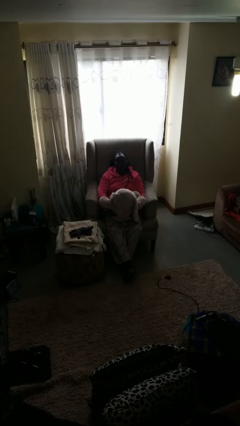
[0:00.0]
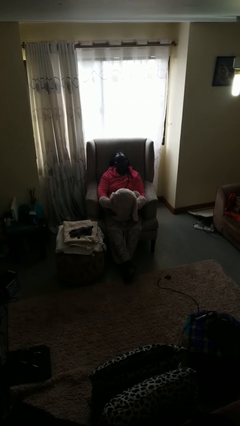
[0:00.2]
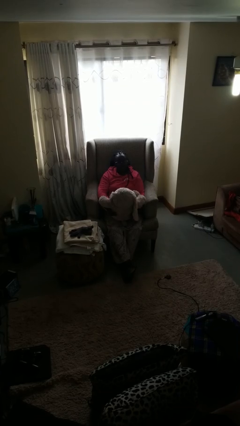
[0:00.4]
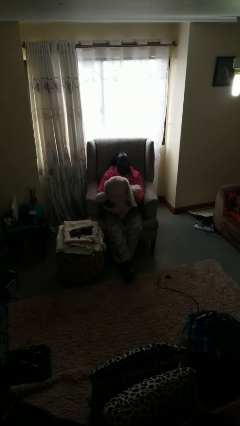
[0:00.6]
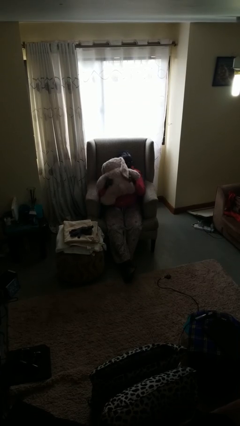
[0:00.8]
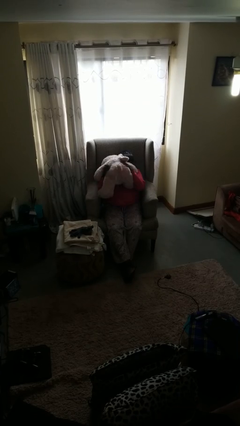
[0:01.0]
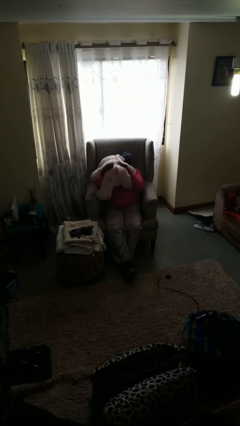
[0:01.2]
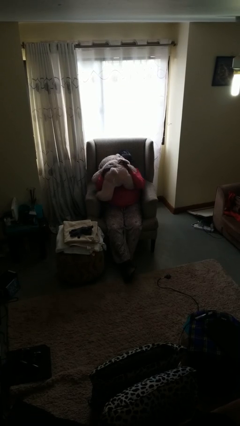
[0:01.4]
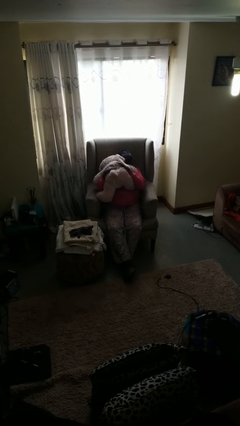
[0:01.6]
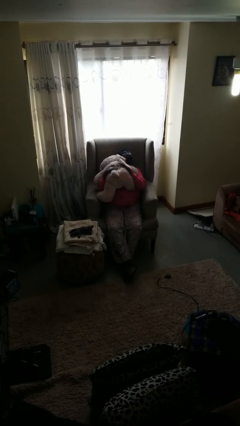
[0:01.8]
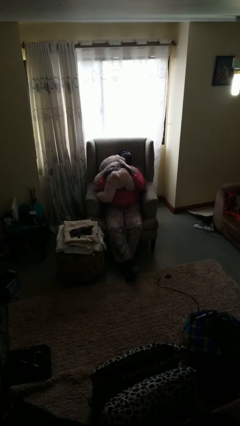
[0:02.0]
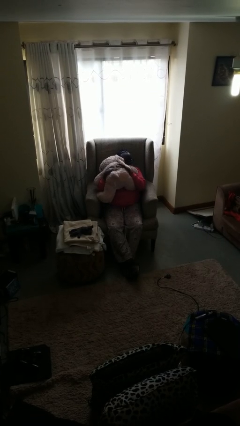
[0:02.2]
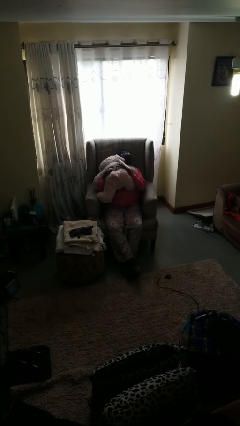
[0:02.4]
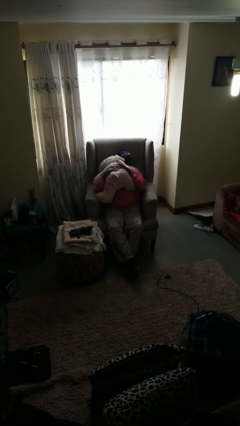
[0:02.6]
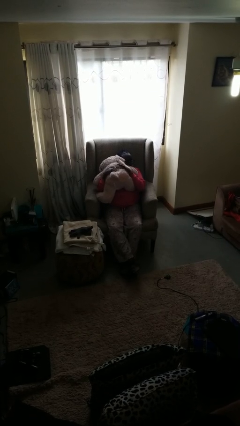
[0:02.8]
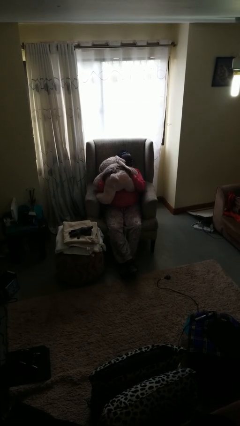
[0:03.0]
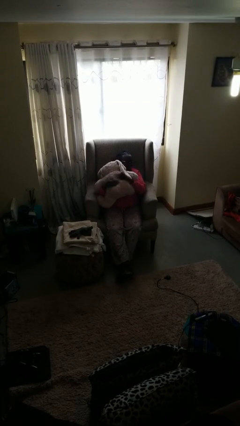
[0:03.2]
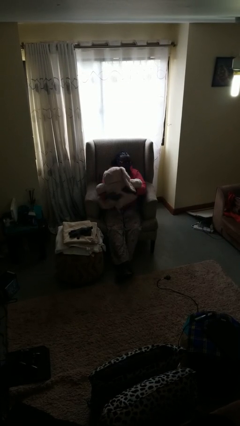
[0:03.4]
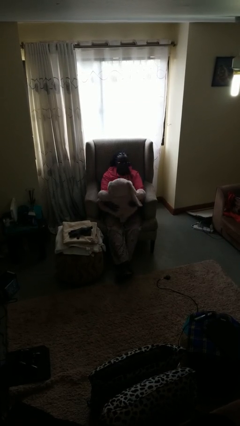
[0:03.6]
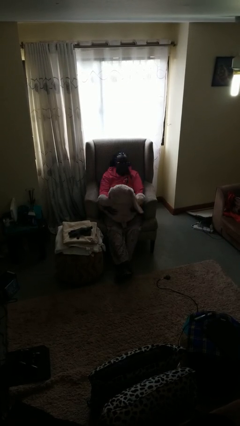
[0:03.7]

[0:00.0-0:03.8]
person hugs stuffed animal

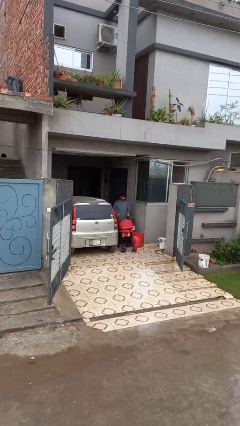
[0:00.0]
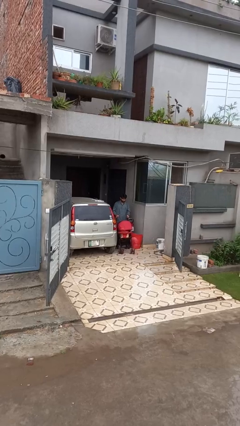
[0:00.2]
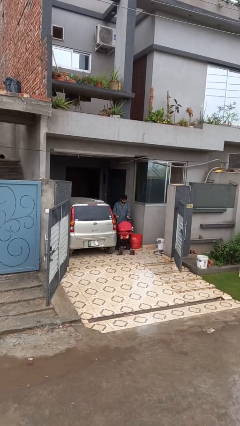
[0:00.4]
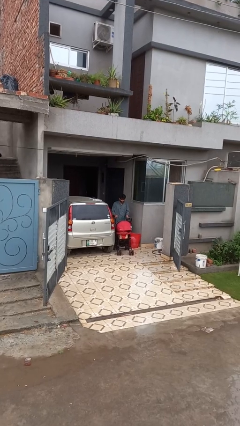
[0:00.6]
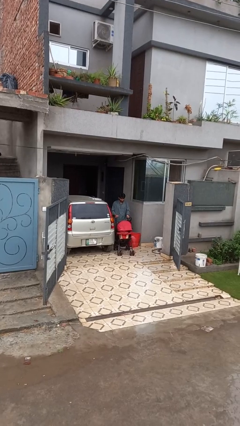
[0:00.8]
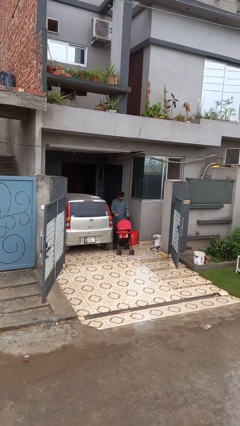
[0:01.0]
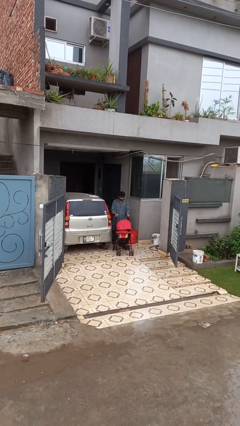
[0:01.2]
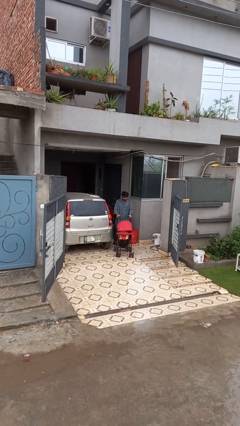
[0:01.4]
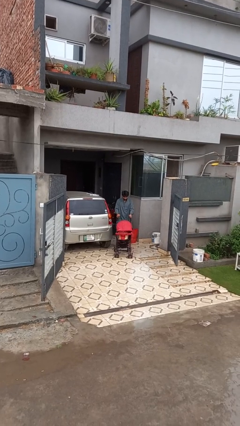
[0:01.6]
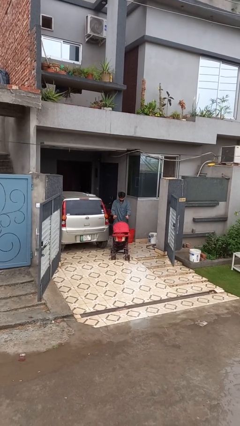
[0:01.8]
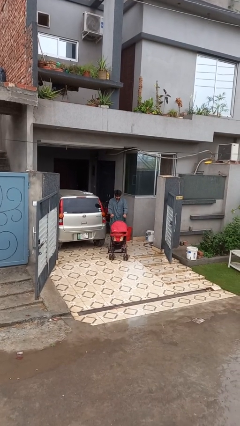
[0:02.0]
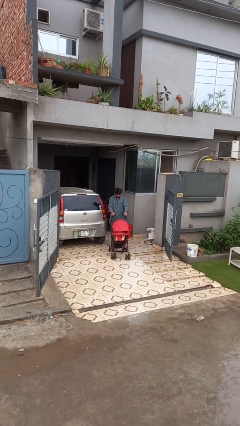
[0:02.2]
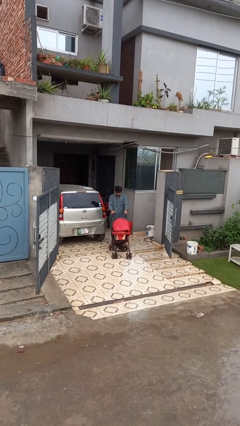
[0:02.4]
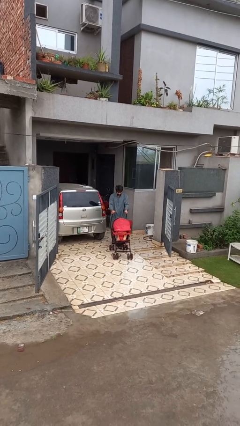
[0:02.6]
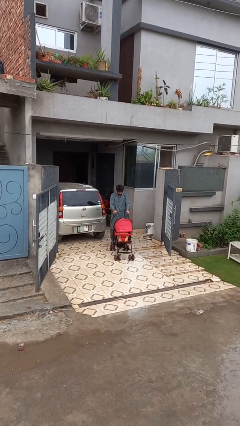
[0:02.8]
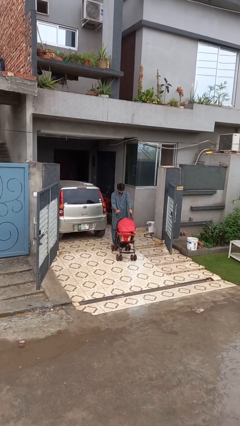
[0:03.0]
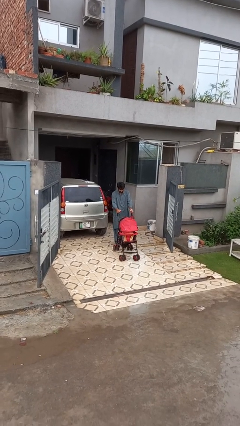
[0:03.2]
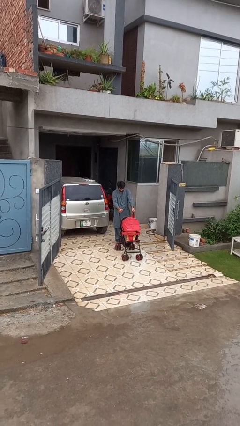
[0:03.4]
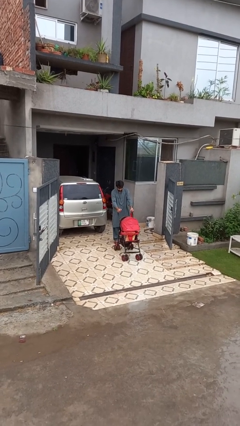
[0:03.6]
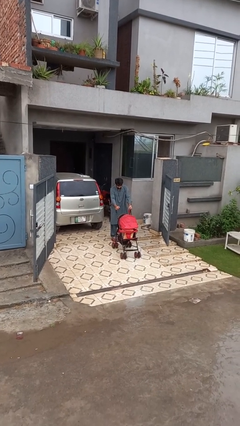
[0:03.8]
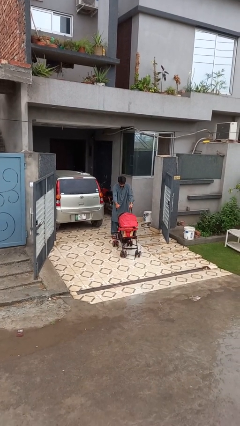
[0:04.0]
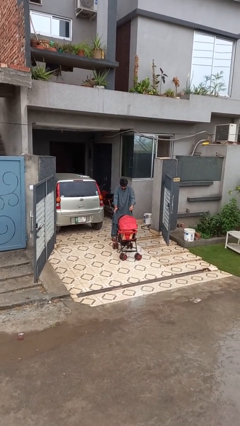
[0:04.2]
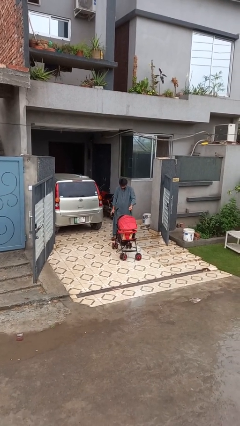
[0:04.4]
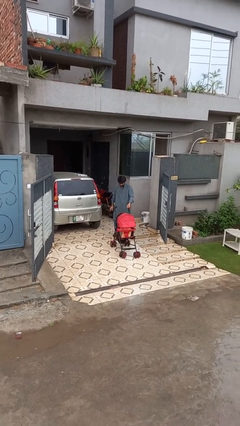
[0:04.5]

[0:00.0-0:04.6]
person pushes wheeled cart

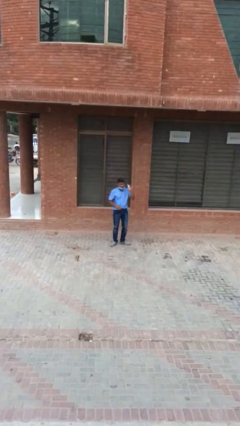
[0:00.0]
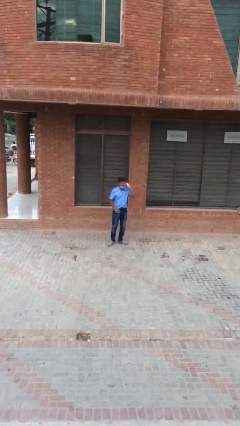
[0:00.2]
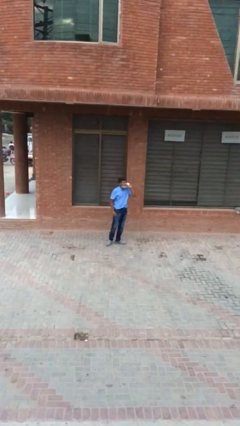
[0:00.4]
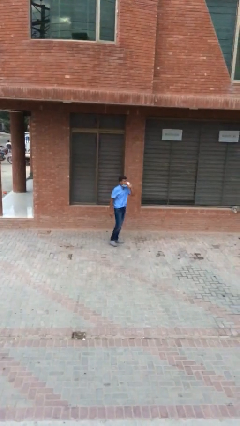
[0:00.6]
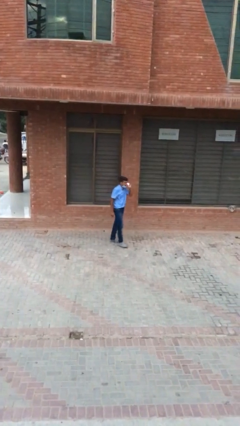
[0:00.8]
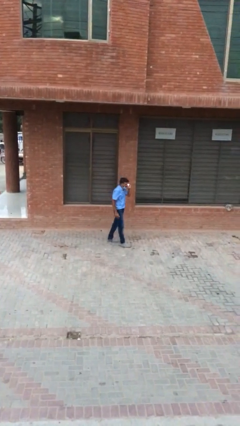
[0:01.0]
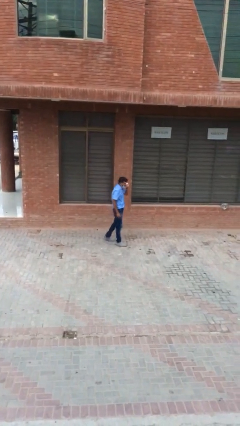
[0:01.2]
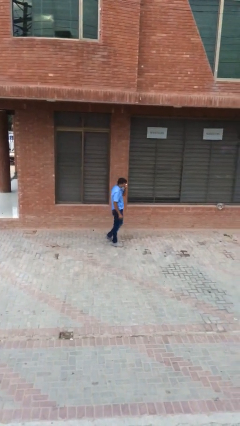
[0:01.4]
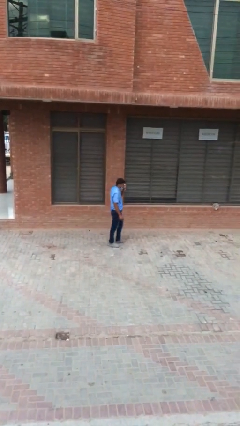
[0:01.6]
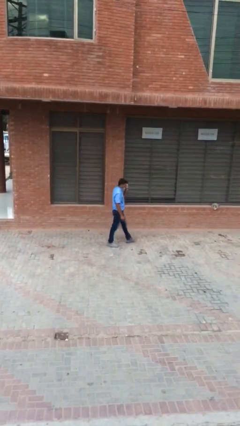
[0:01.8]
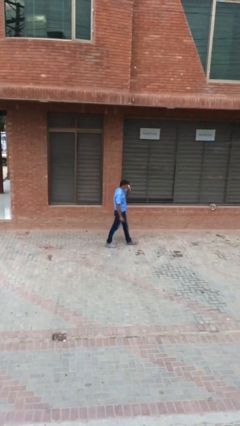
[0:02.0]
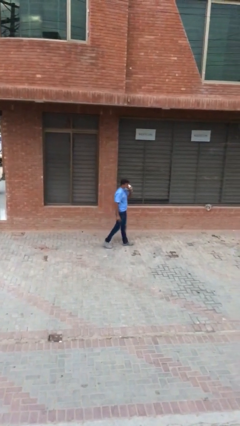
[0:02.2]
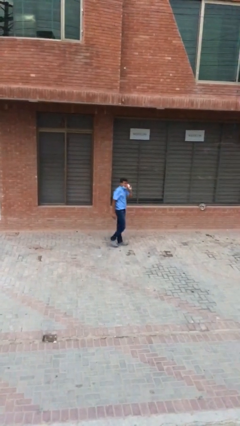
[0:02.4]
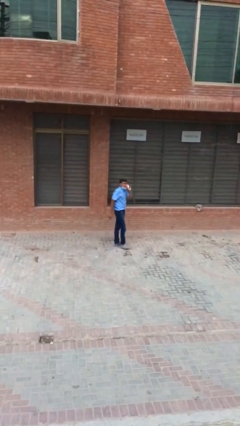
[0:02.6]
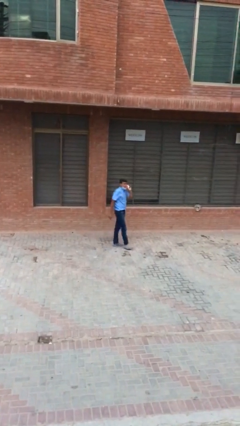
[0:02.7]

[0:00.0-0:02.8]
person talks on phone

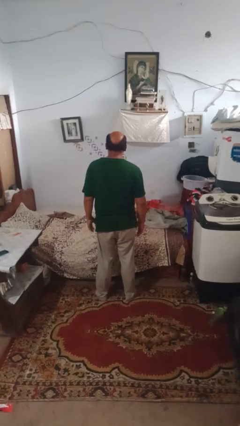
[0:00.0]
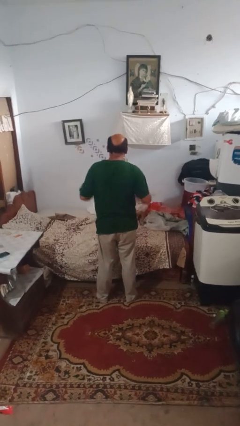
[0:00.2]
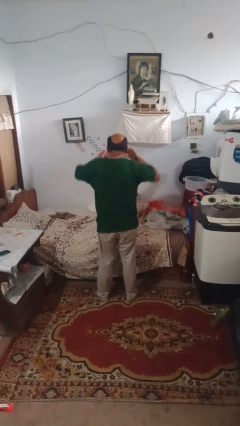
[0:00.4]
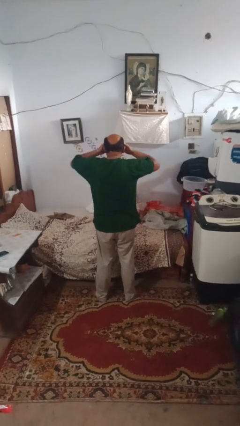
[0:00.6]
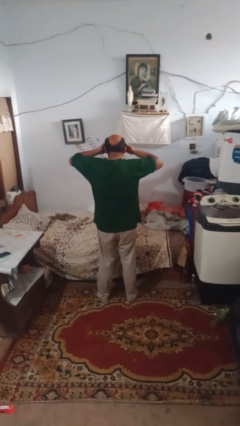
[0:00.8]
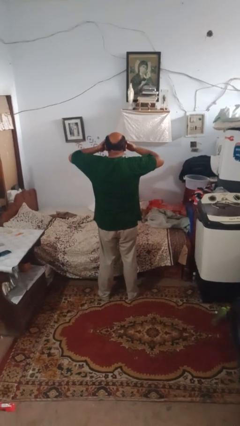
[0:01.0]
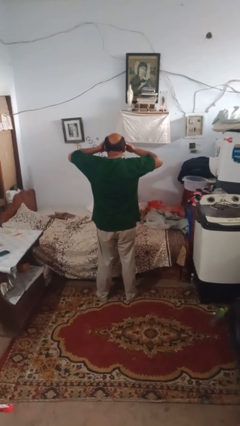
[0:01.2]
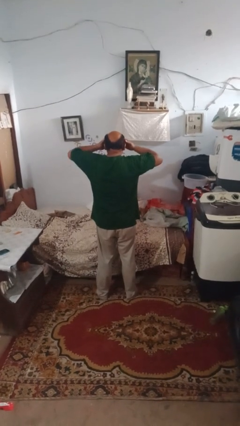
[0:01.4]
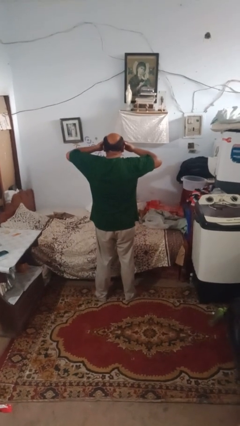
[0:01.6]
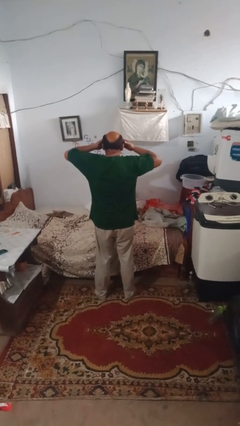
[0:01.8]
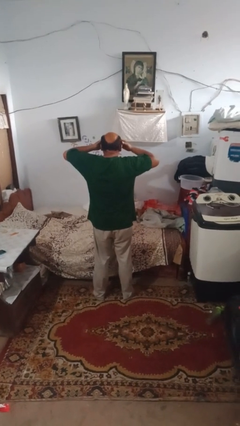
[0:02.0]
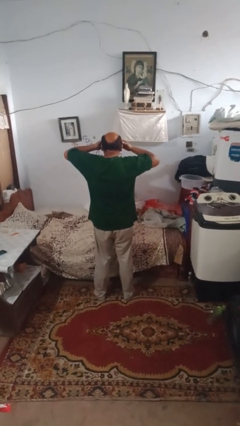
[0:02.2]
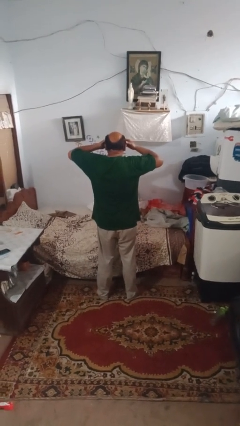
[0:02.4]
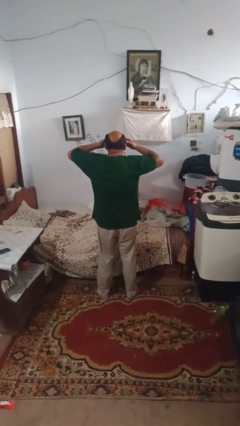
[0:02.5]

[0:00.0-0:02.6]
person rubs eyes

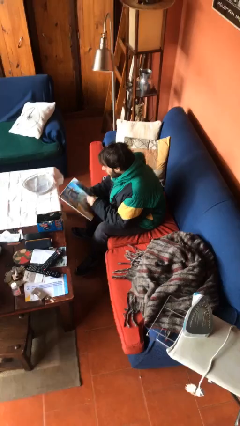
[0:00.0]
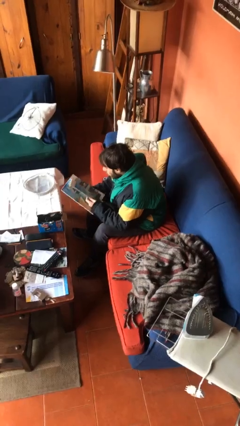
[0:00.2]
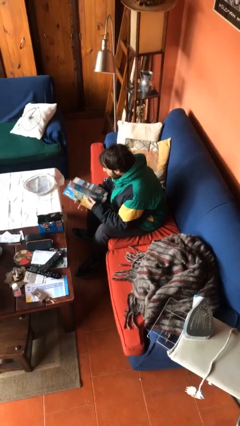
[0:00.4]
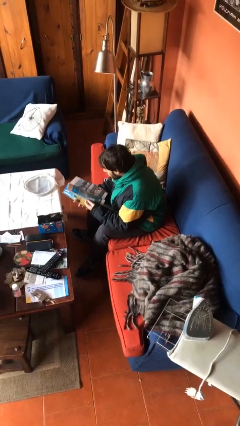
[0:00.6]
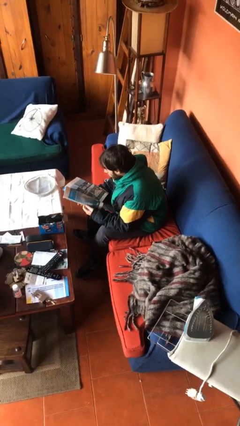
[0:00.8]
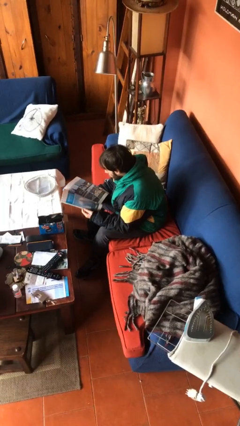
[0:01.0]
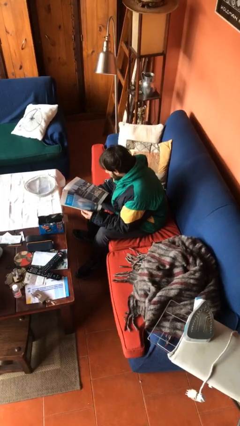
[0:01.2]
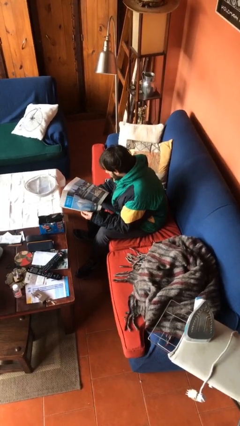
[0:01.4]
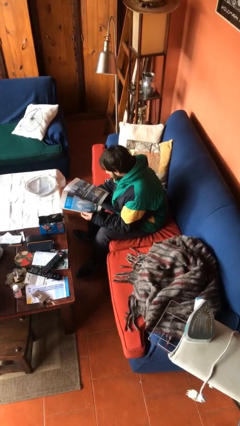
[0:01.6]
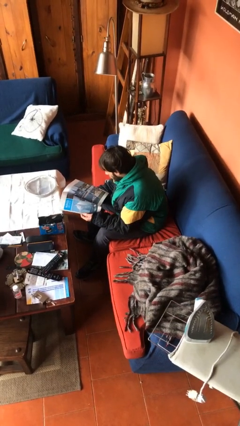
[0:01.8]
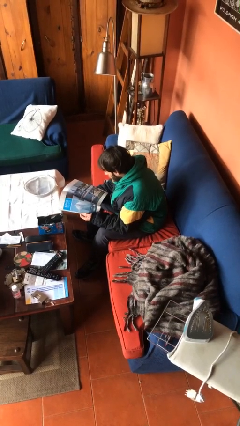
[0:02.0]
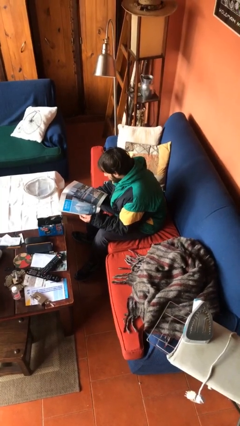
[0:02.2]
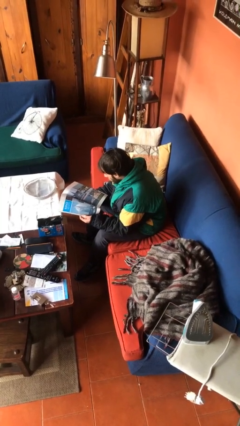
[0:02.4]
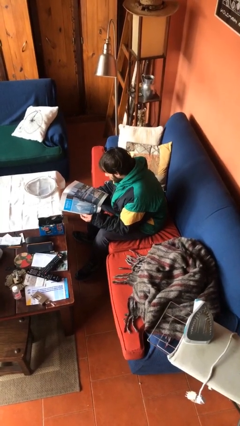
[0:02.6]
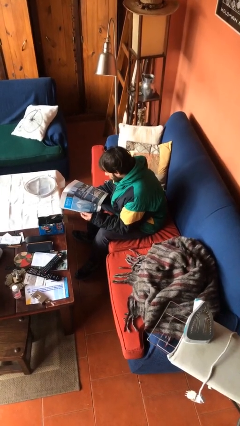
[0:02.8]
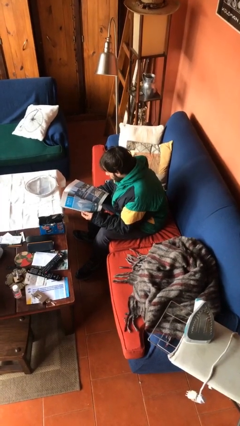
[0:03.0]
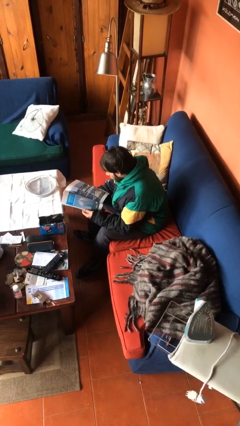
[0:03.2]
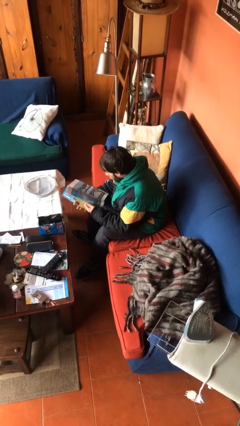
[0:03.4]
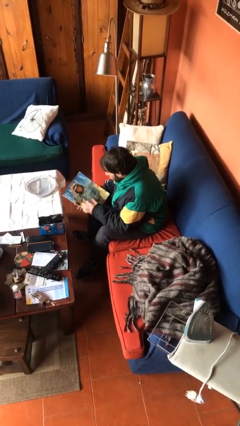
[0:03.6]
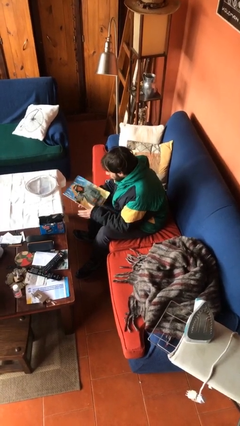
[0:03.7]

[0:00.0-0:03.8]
person reads magazine
